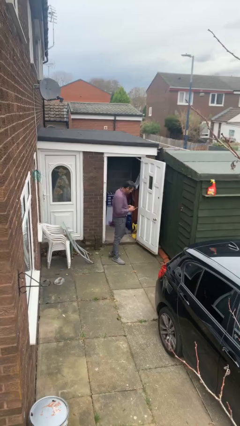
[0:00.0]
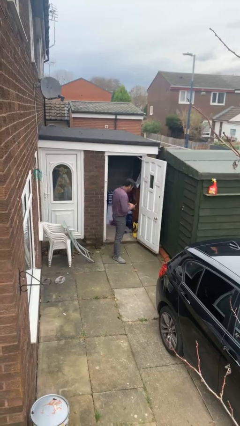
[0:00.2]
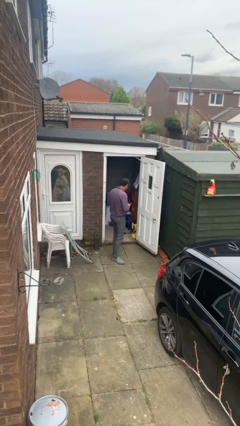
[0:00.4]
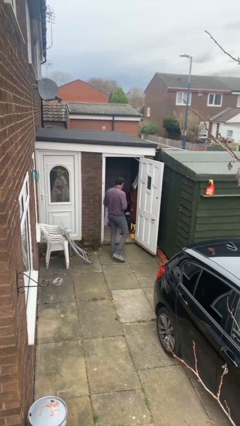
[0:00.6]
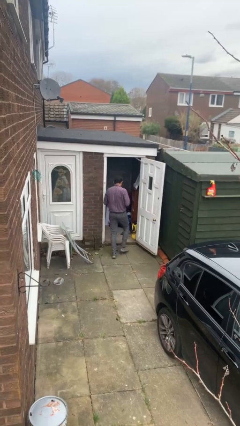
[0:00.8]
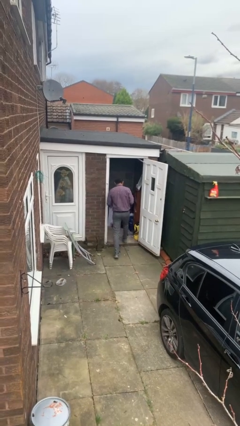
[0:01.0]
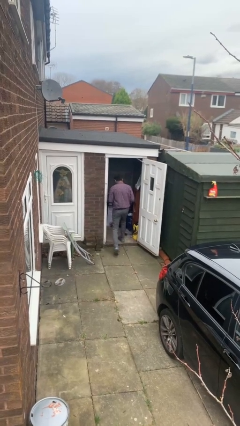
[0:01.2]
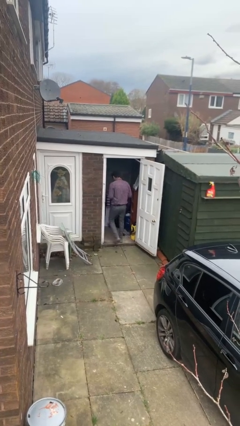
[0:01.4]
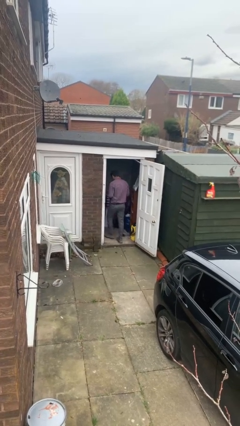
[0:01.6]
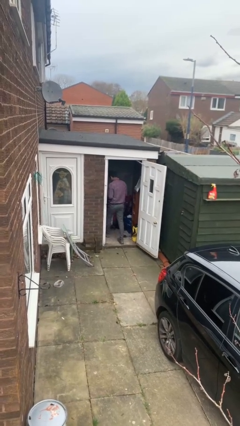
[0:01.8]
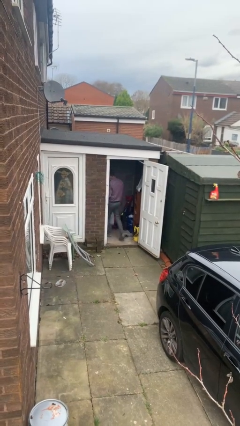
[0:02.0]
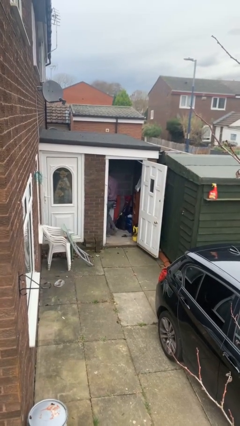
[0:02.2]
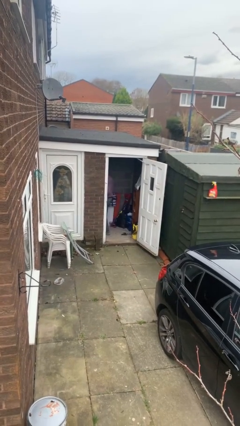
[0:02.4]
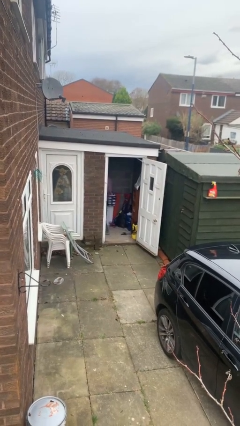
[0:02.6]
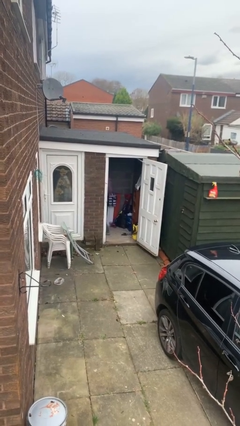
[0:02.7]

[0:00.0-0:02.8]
person exits scene through structure

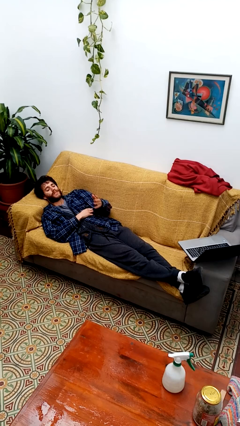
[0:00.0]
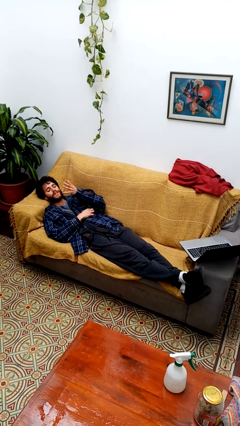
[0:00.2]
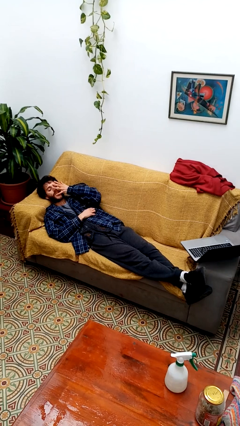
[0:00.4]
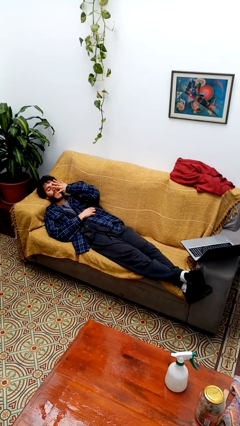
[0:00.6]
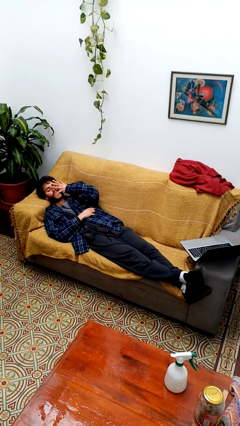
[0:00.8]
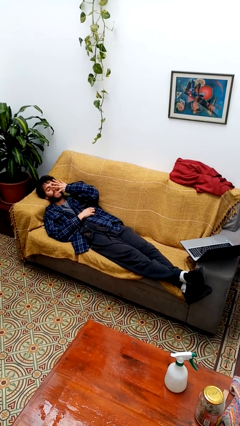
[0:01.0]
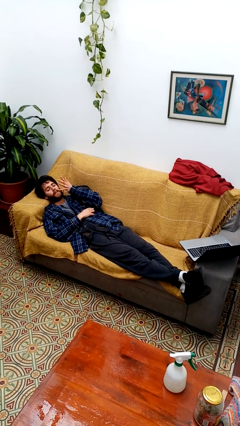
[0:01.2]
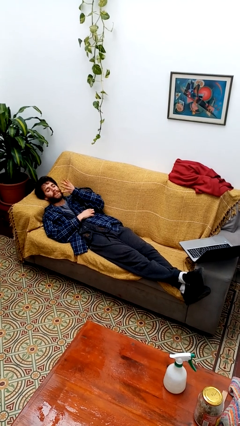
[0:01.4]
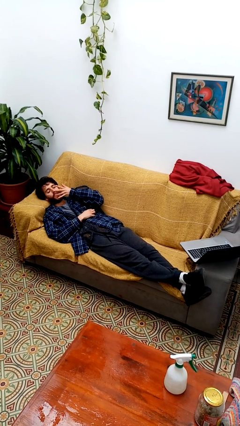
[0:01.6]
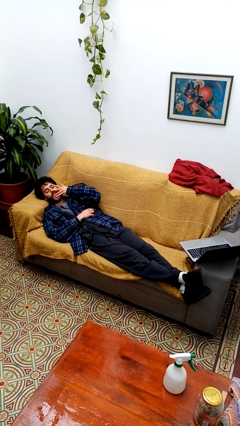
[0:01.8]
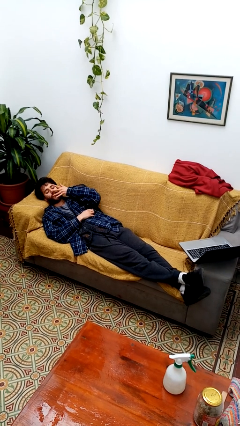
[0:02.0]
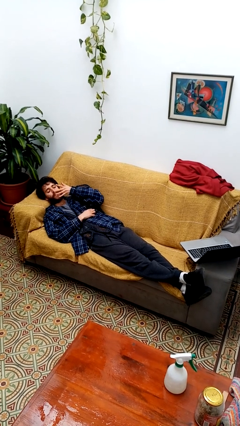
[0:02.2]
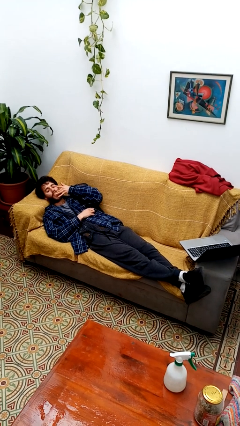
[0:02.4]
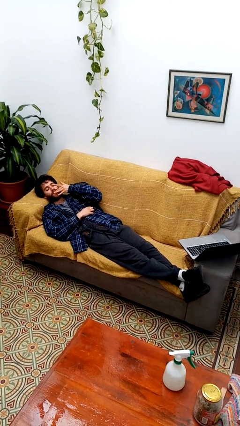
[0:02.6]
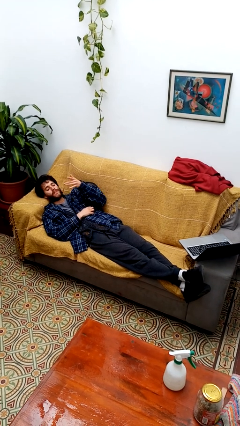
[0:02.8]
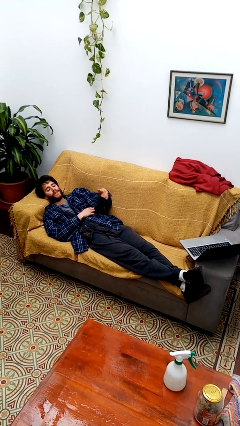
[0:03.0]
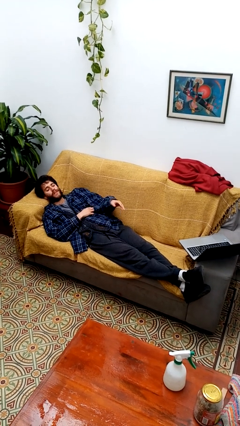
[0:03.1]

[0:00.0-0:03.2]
person licks fingers

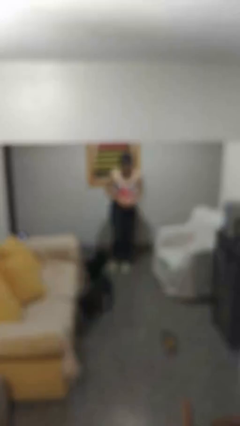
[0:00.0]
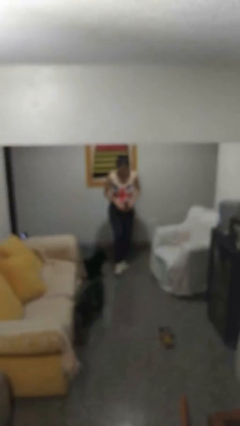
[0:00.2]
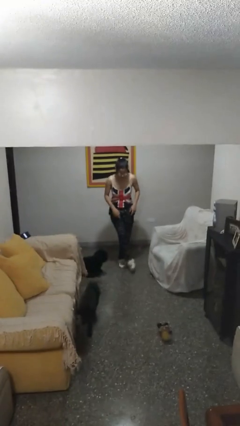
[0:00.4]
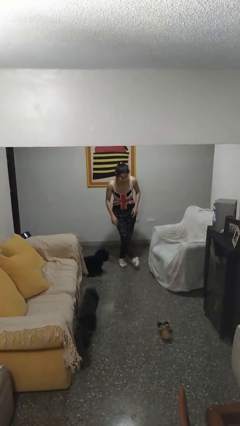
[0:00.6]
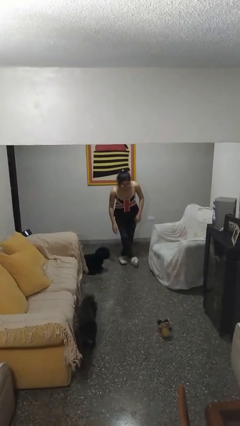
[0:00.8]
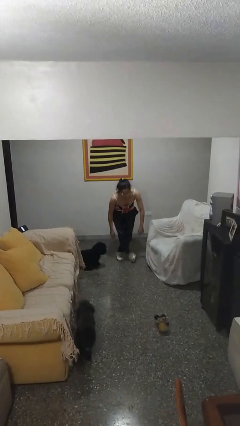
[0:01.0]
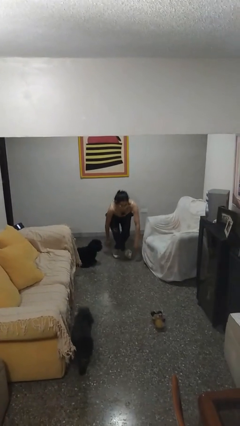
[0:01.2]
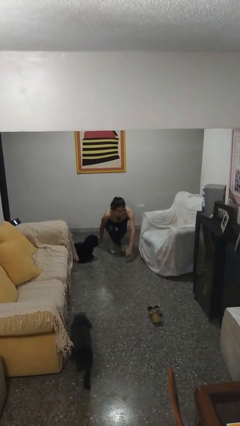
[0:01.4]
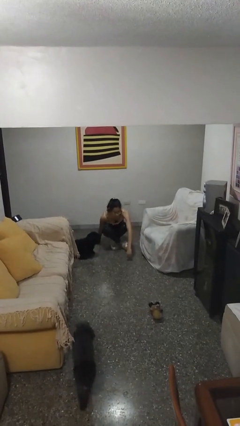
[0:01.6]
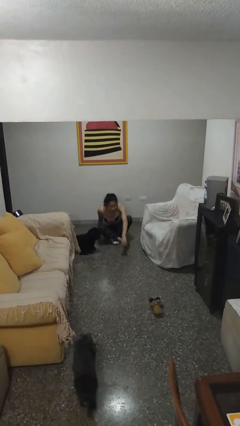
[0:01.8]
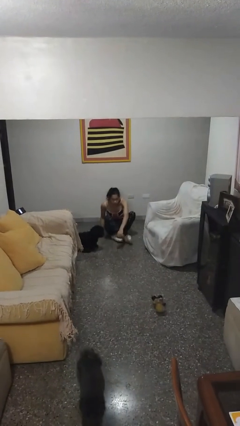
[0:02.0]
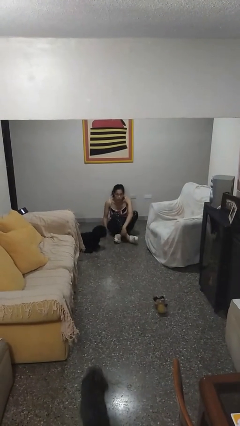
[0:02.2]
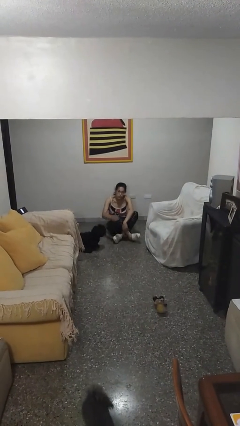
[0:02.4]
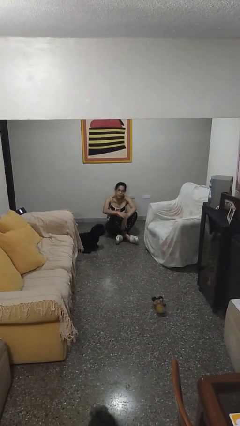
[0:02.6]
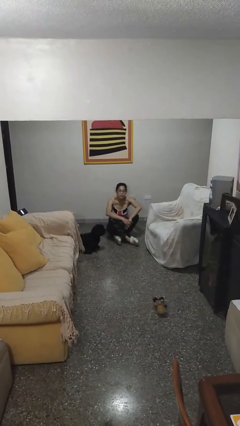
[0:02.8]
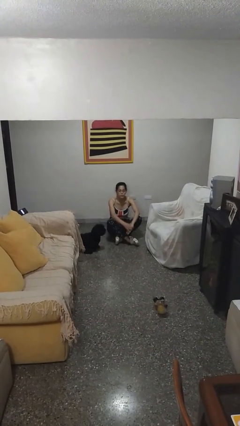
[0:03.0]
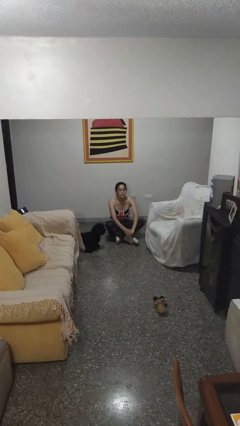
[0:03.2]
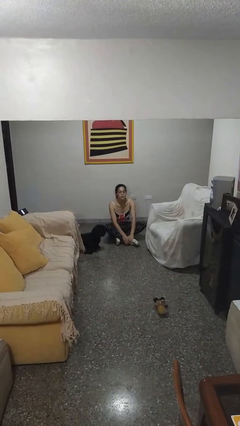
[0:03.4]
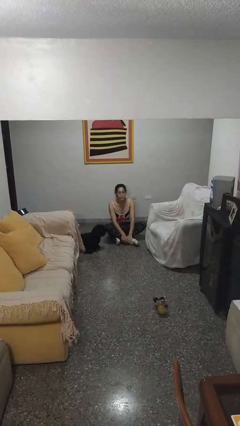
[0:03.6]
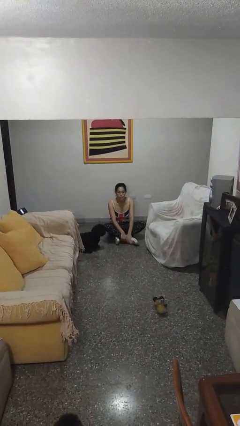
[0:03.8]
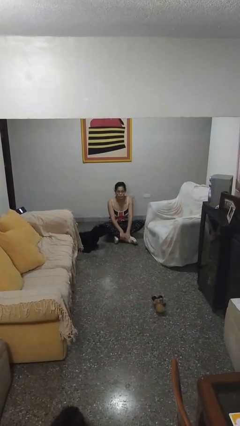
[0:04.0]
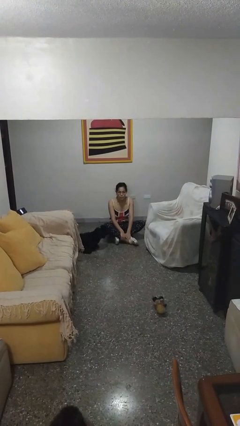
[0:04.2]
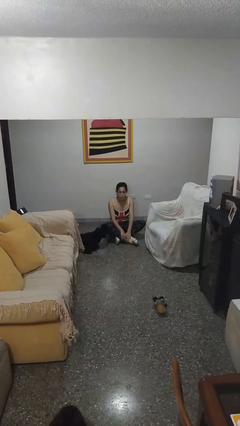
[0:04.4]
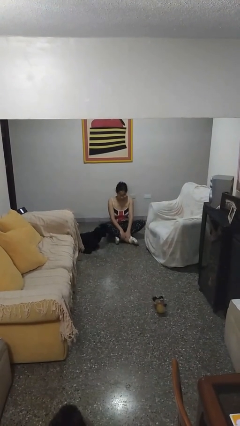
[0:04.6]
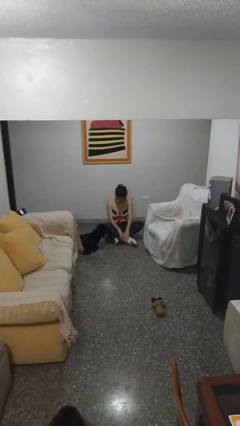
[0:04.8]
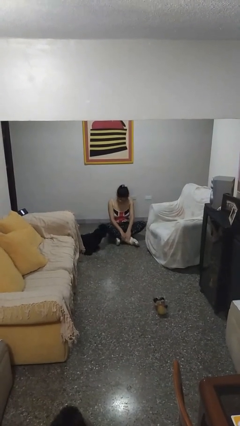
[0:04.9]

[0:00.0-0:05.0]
person sits crisscross

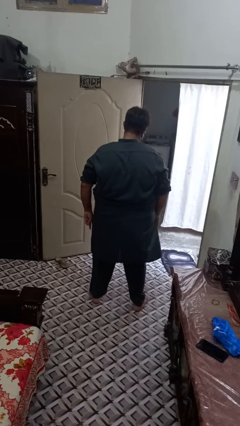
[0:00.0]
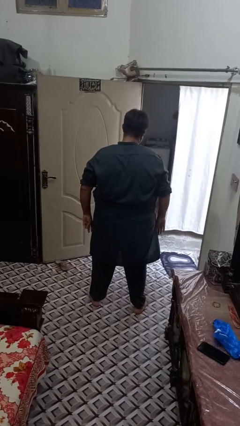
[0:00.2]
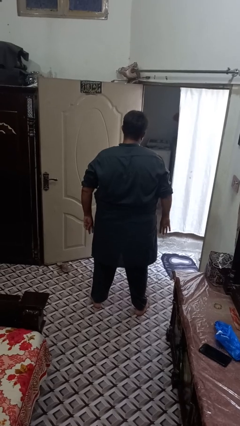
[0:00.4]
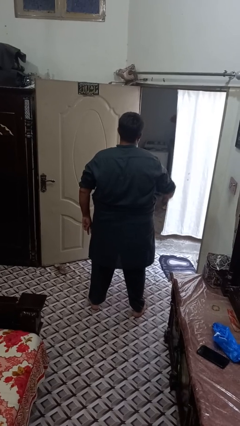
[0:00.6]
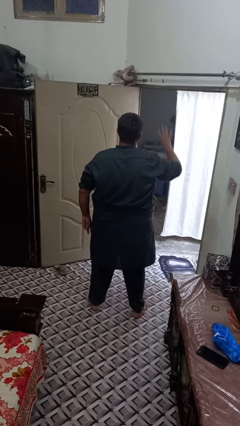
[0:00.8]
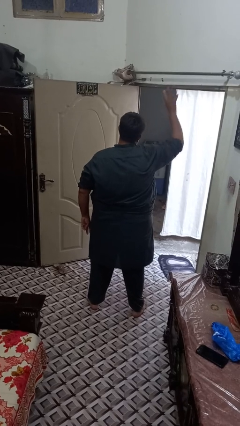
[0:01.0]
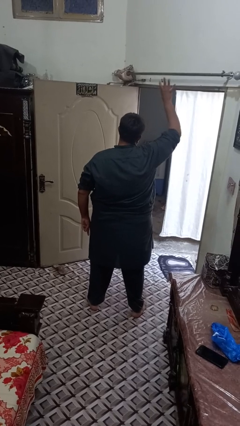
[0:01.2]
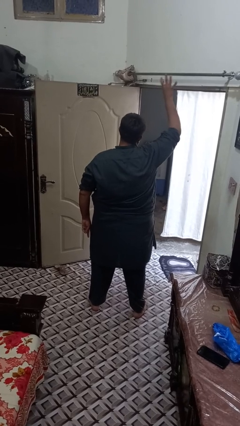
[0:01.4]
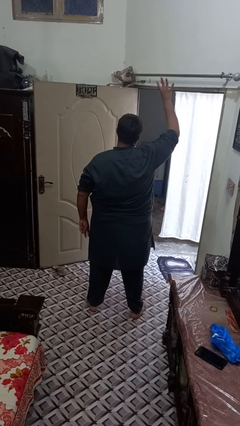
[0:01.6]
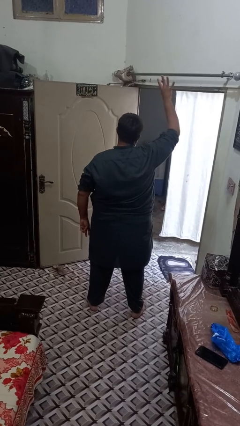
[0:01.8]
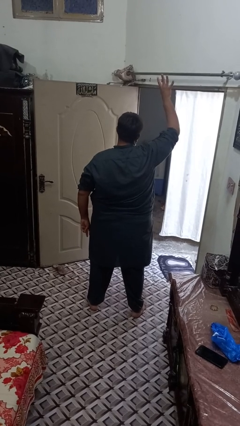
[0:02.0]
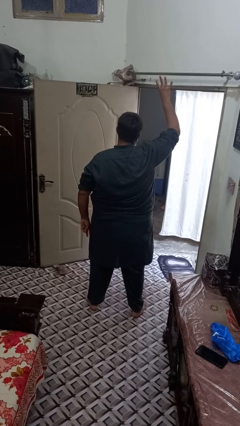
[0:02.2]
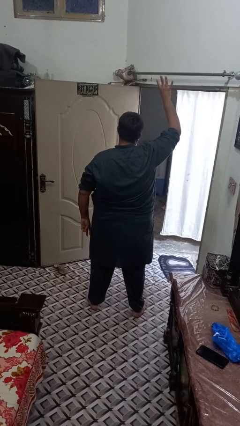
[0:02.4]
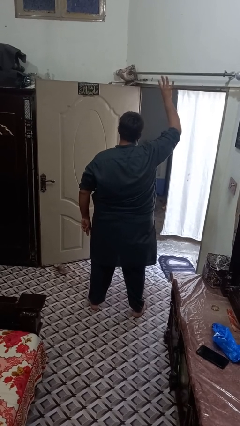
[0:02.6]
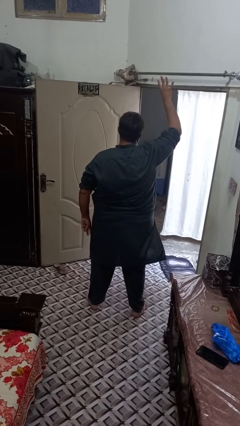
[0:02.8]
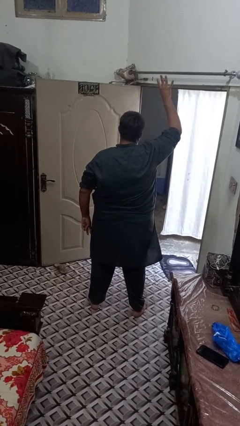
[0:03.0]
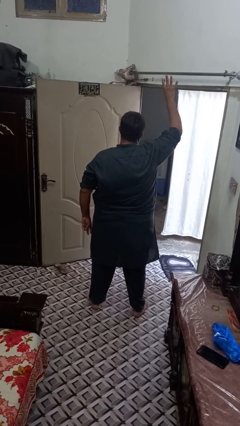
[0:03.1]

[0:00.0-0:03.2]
person gestures number four

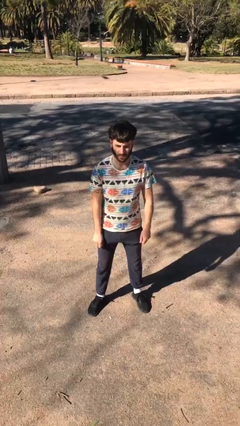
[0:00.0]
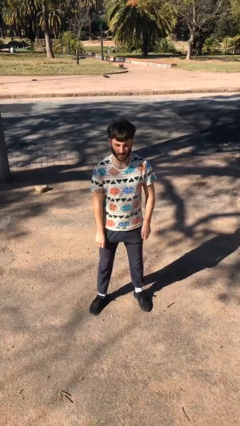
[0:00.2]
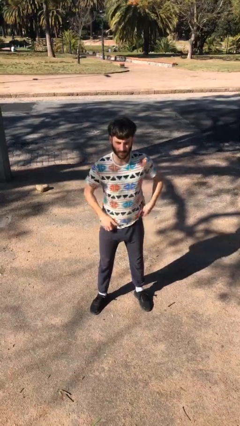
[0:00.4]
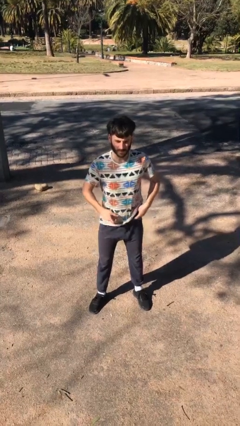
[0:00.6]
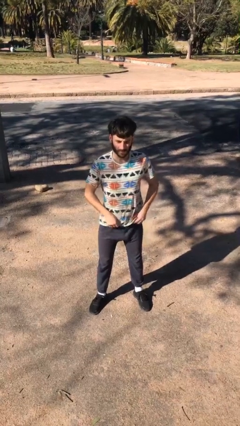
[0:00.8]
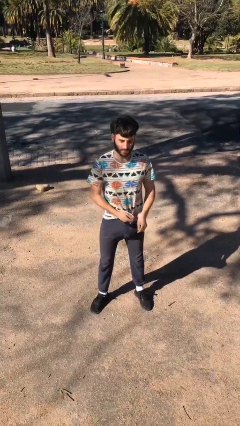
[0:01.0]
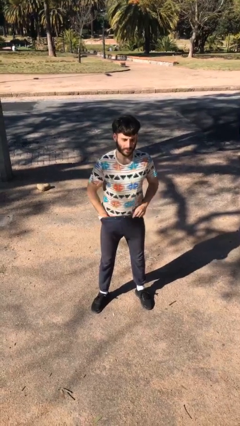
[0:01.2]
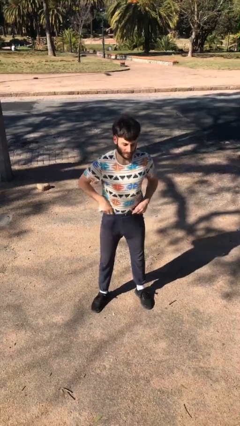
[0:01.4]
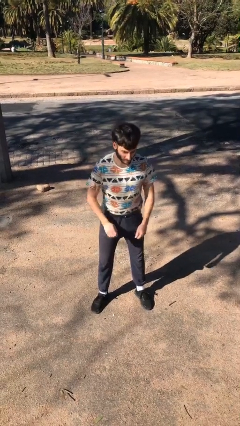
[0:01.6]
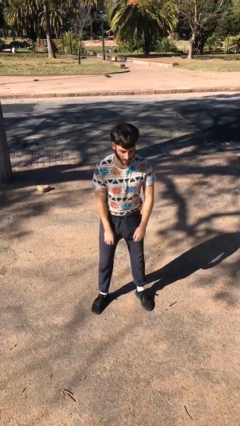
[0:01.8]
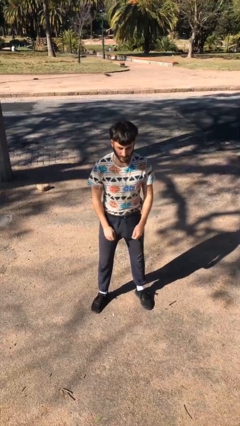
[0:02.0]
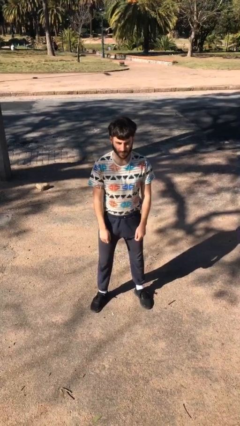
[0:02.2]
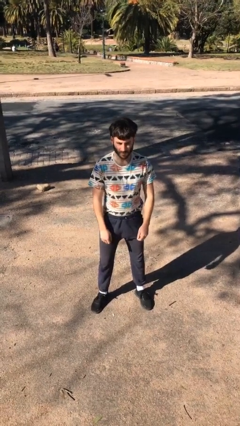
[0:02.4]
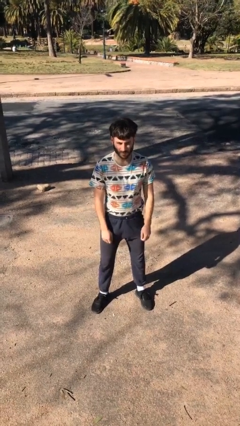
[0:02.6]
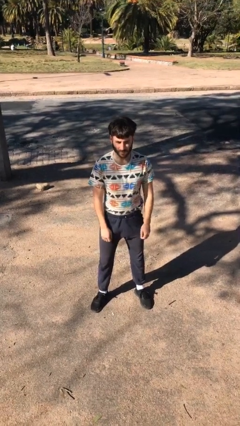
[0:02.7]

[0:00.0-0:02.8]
person tucks in shirt

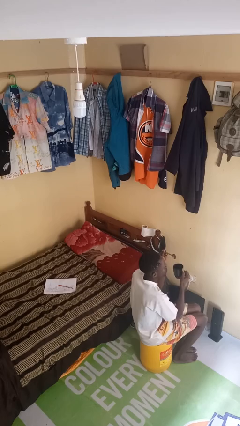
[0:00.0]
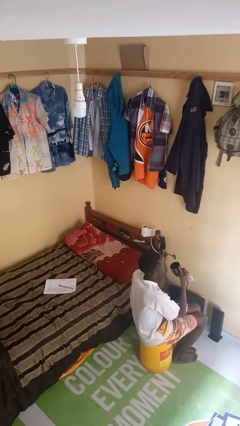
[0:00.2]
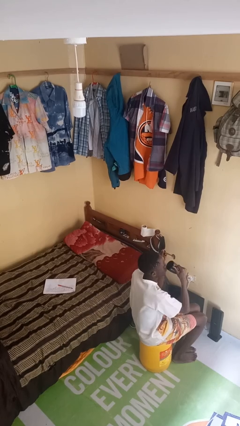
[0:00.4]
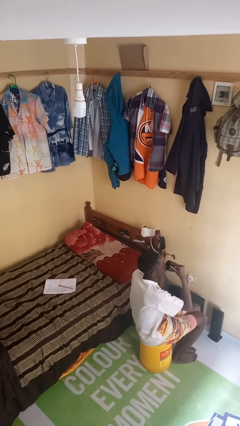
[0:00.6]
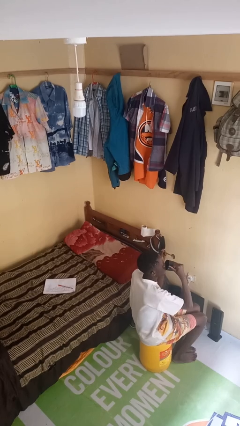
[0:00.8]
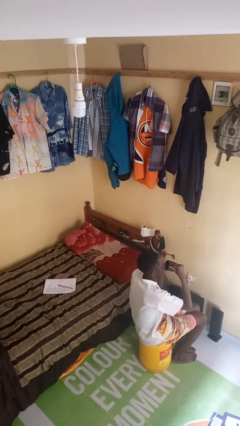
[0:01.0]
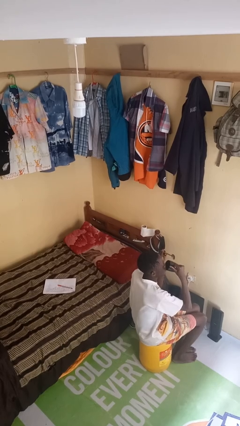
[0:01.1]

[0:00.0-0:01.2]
person drinks from mug
